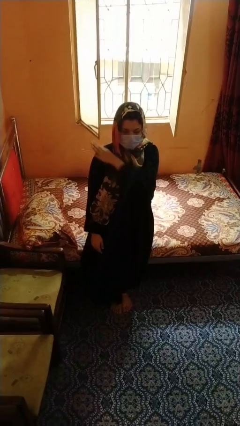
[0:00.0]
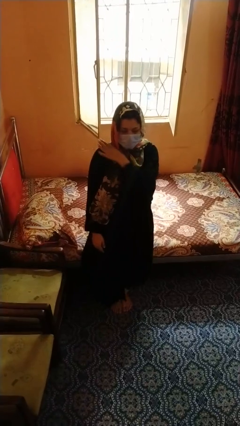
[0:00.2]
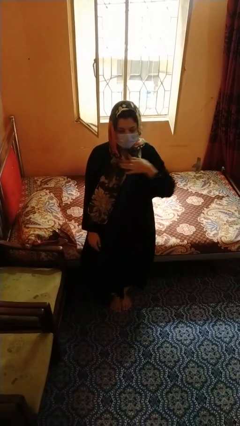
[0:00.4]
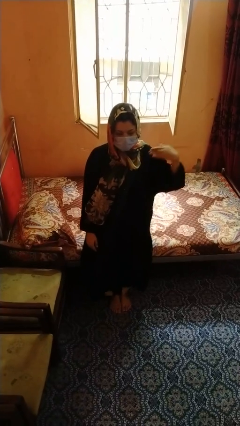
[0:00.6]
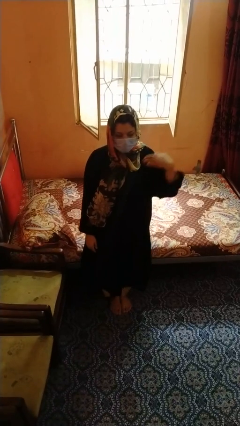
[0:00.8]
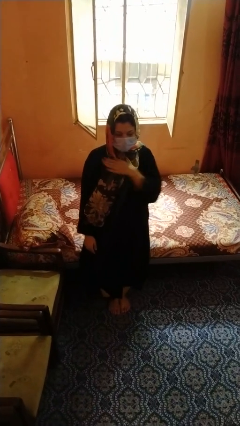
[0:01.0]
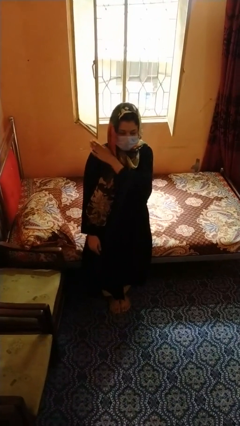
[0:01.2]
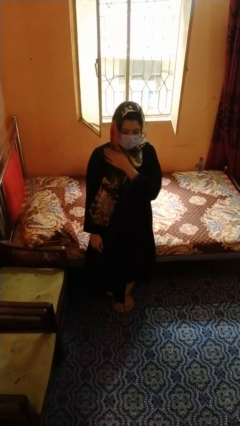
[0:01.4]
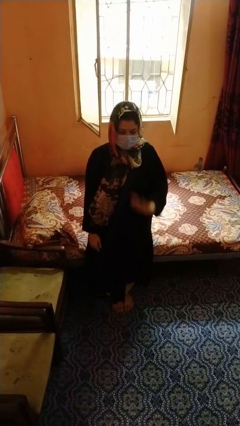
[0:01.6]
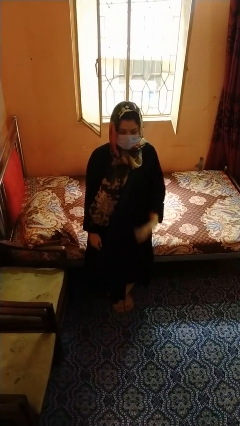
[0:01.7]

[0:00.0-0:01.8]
person gestures cut

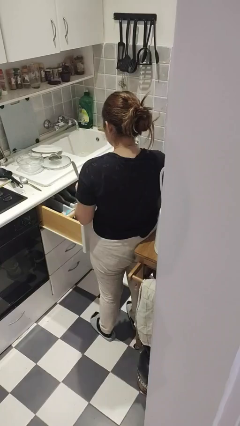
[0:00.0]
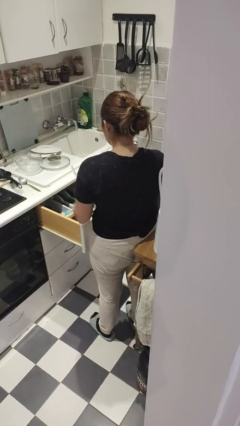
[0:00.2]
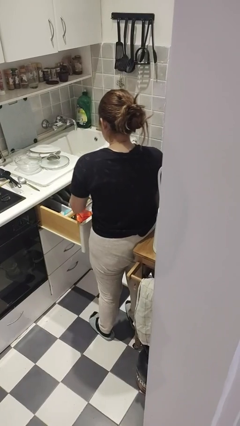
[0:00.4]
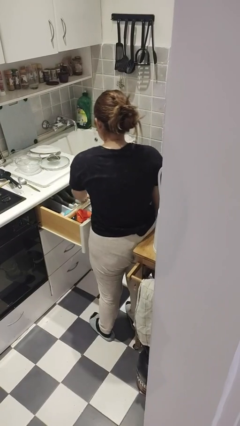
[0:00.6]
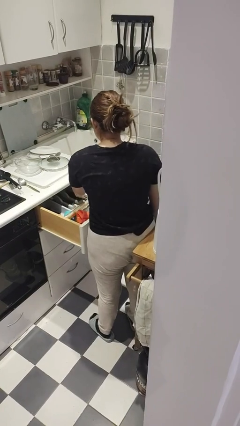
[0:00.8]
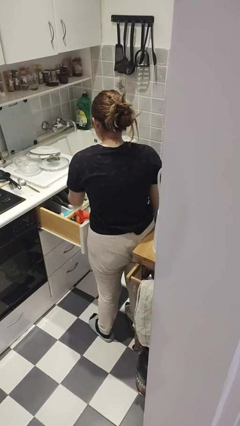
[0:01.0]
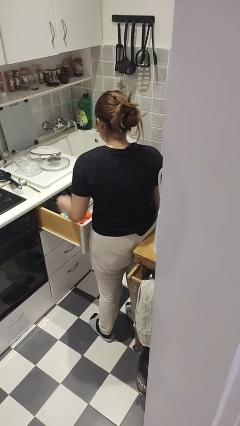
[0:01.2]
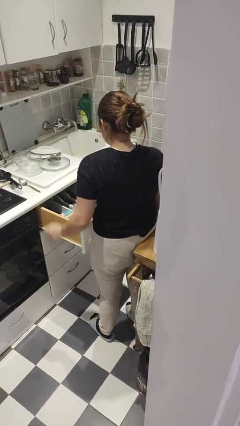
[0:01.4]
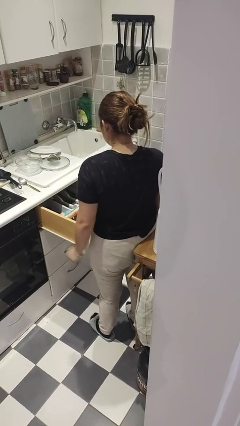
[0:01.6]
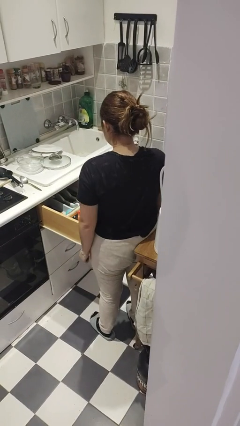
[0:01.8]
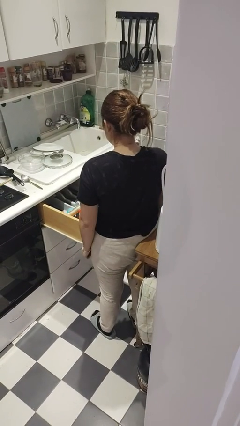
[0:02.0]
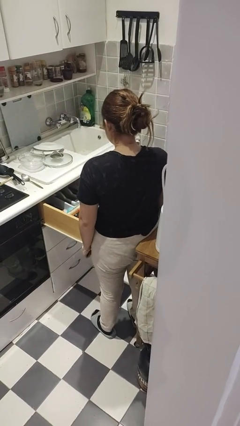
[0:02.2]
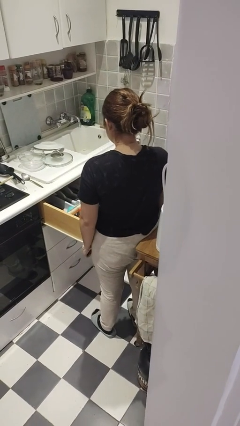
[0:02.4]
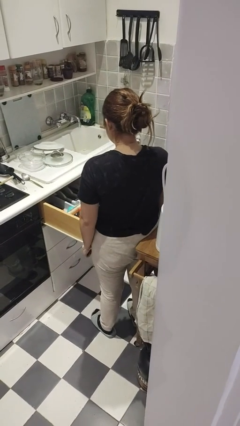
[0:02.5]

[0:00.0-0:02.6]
person puts object into kitchen drawer

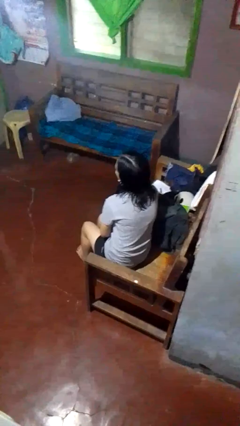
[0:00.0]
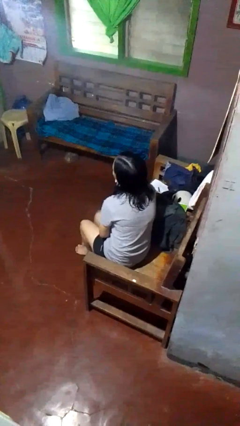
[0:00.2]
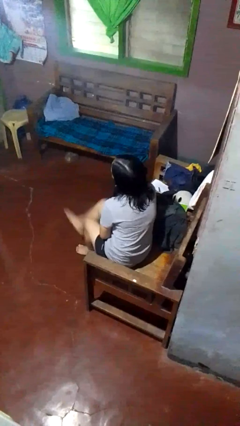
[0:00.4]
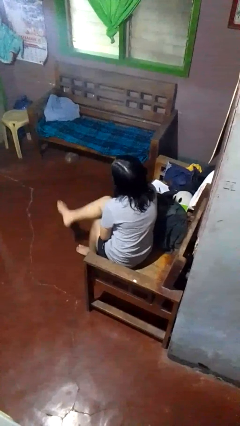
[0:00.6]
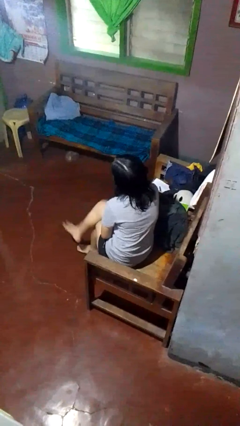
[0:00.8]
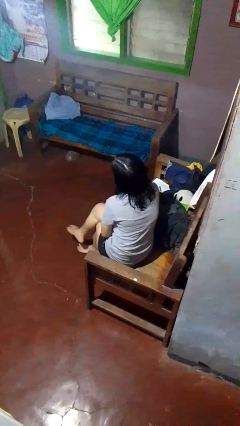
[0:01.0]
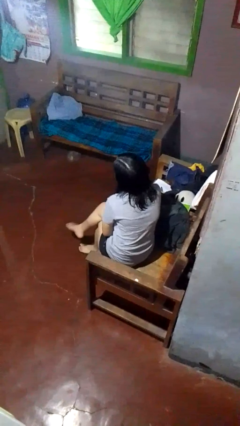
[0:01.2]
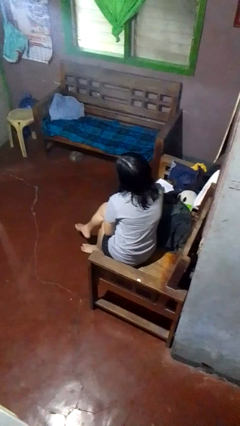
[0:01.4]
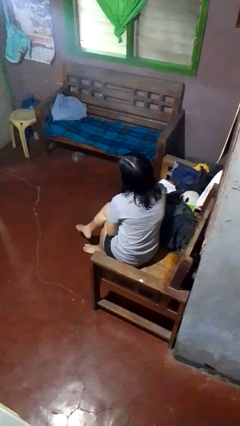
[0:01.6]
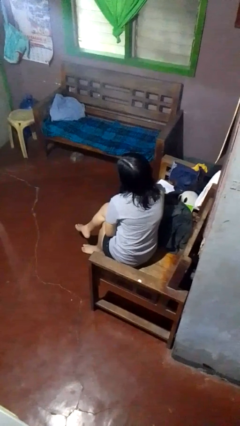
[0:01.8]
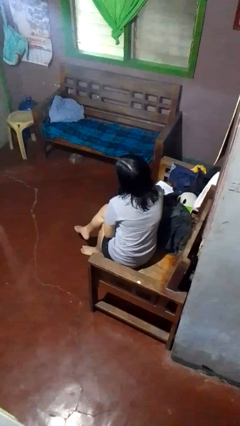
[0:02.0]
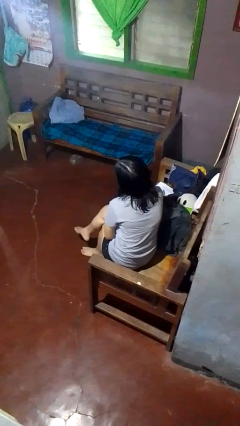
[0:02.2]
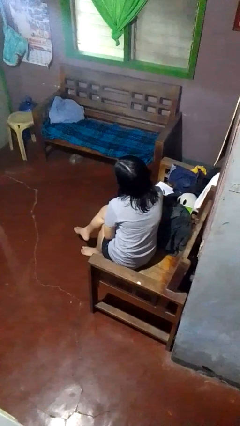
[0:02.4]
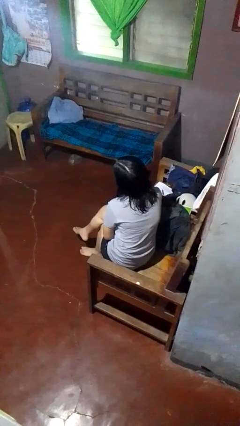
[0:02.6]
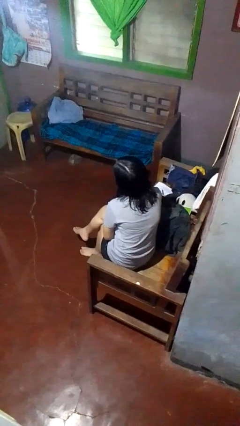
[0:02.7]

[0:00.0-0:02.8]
person crosses legs

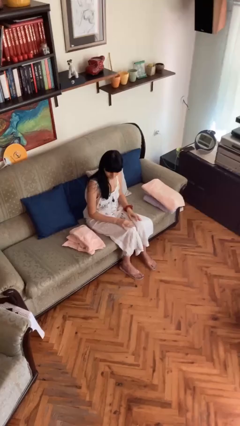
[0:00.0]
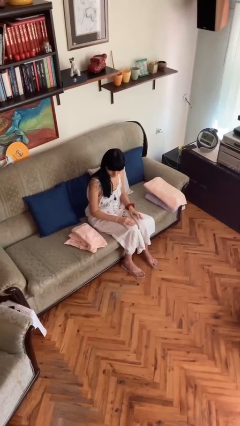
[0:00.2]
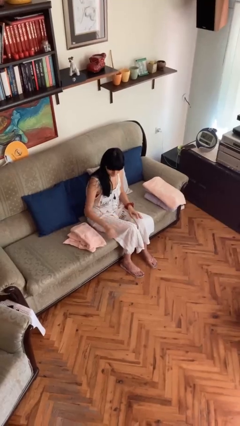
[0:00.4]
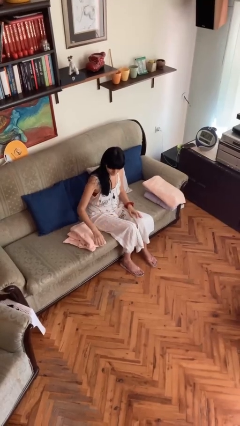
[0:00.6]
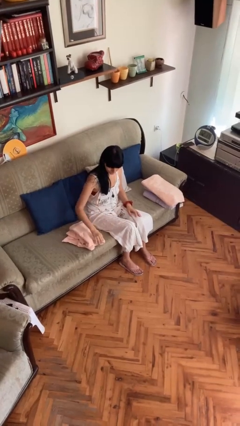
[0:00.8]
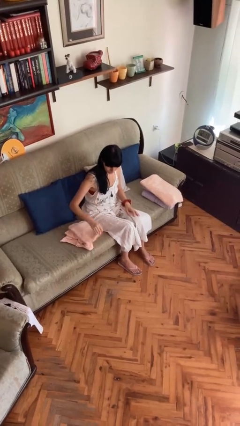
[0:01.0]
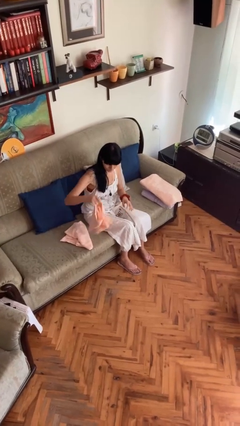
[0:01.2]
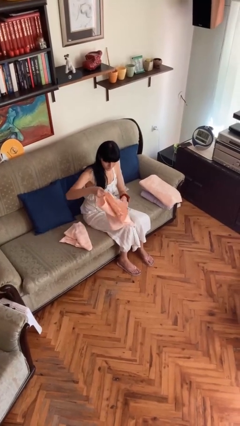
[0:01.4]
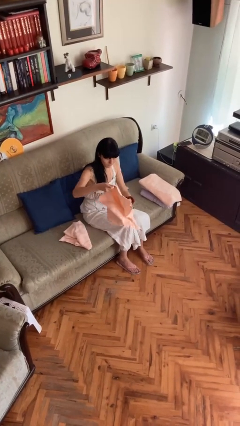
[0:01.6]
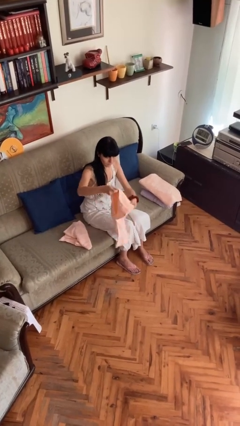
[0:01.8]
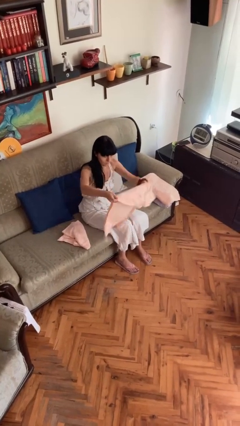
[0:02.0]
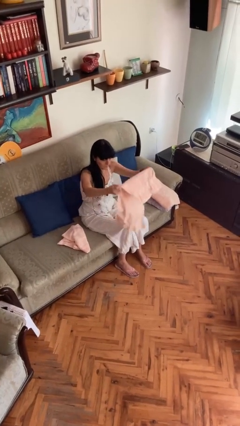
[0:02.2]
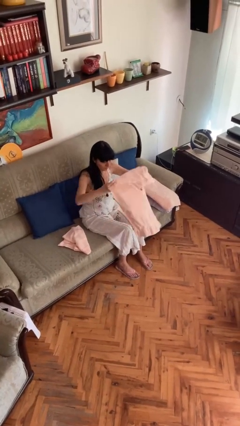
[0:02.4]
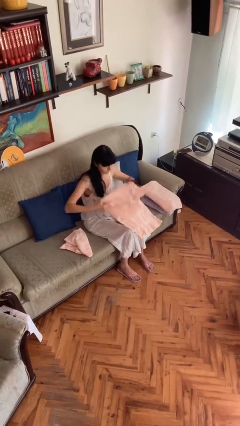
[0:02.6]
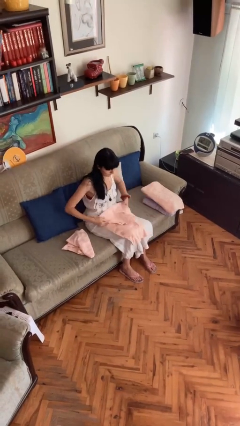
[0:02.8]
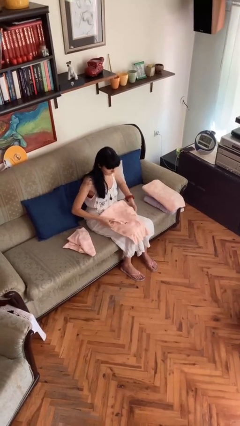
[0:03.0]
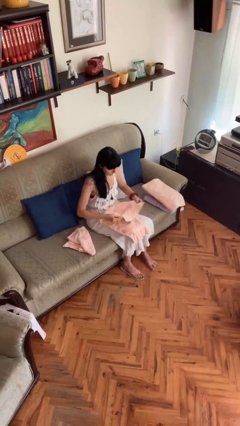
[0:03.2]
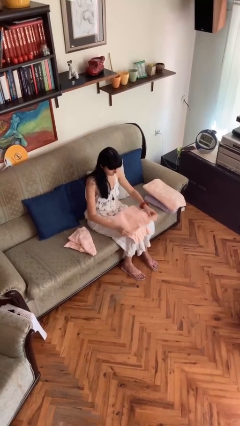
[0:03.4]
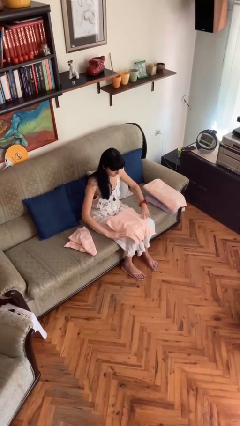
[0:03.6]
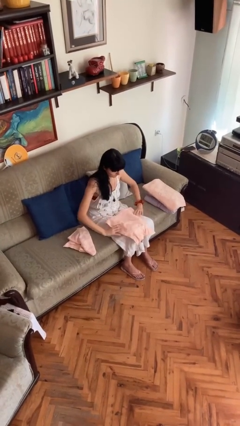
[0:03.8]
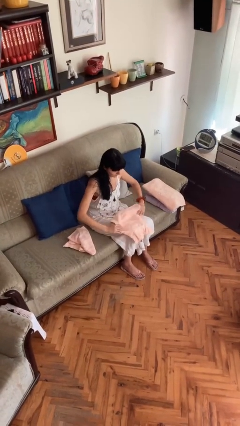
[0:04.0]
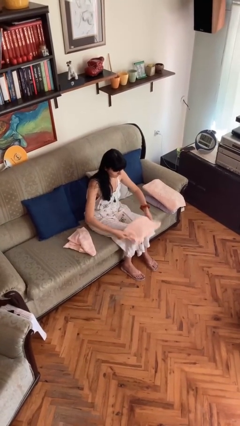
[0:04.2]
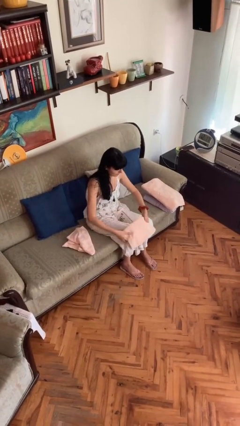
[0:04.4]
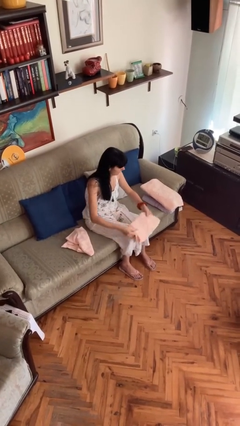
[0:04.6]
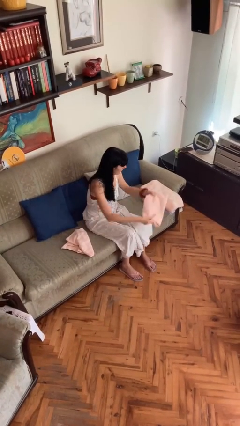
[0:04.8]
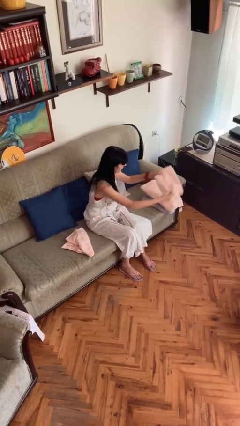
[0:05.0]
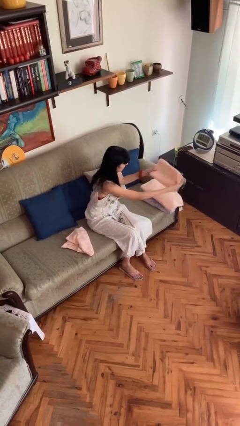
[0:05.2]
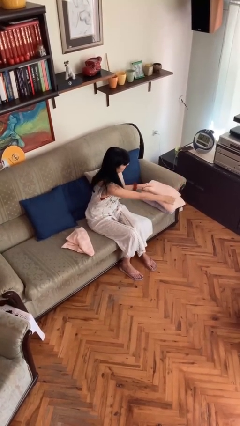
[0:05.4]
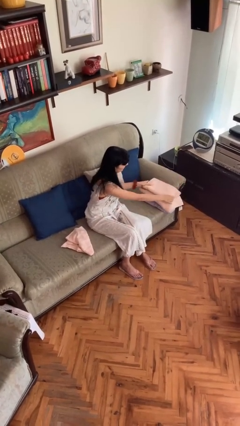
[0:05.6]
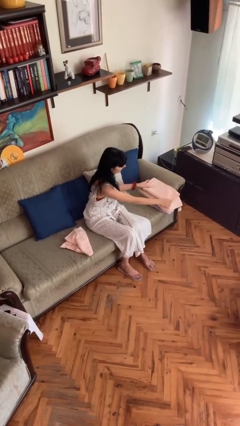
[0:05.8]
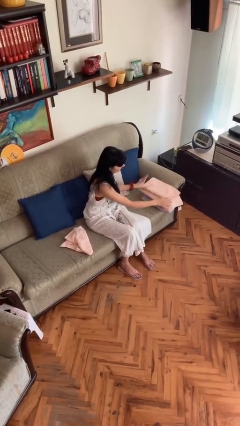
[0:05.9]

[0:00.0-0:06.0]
person folds towel

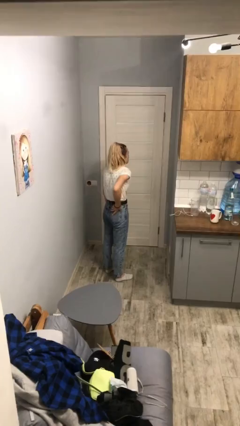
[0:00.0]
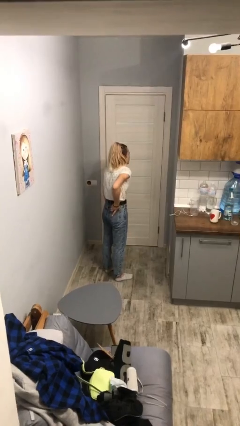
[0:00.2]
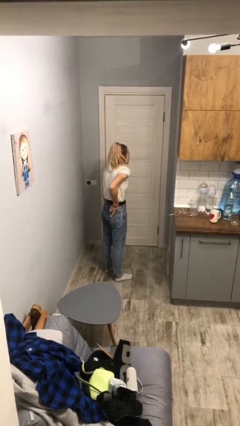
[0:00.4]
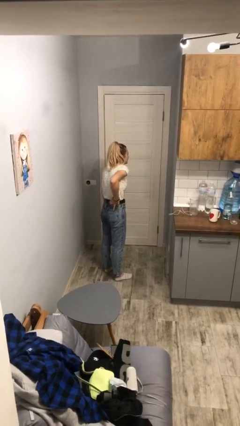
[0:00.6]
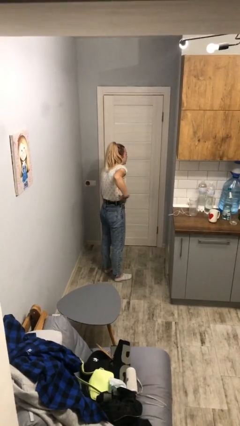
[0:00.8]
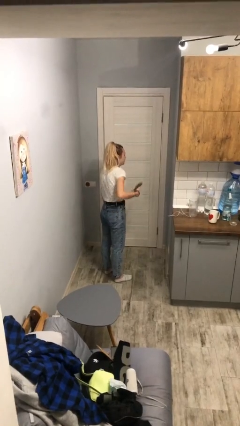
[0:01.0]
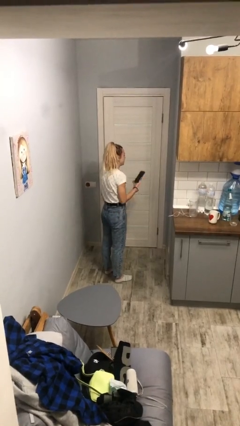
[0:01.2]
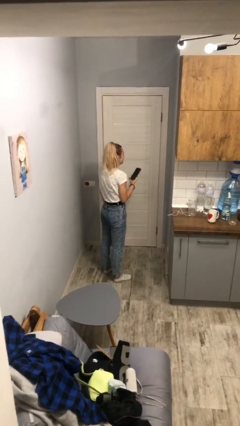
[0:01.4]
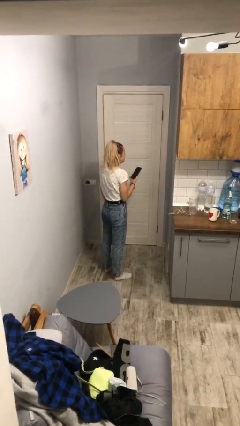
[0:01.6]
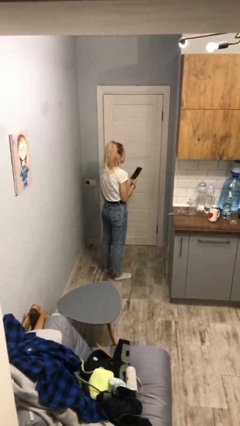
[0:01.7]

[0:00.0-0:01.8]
person takes phone from pocket

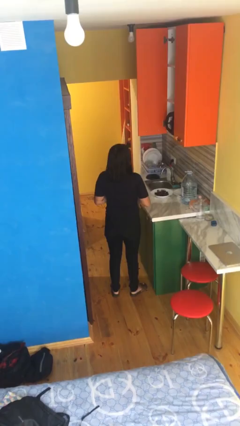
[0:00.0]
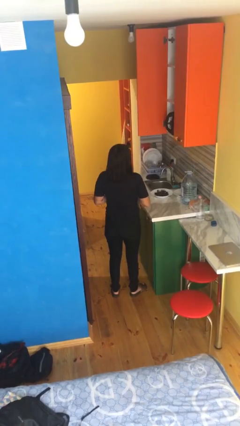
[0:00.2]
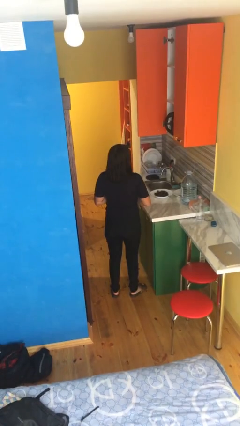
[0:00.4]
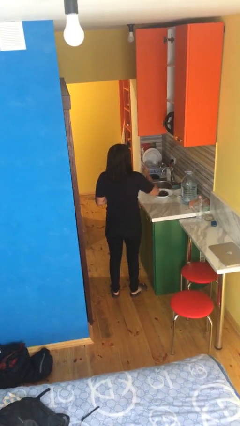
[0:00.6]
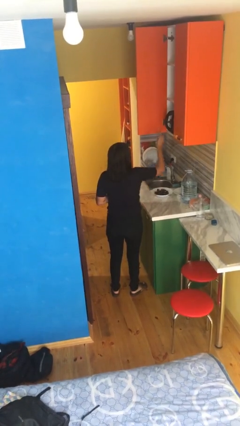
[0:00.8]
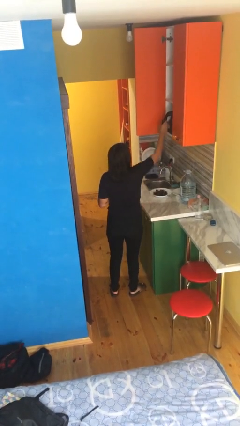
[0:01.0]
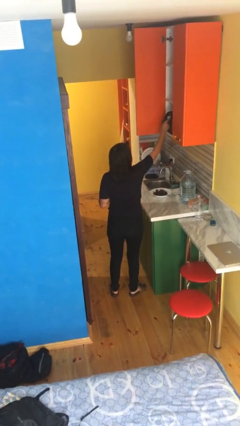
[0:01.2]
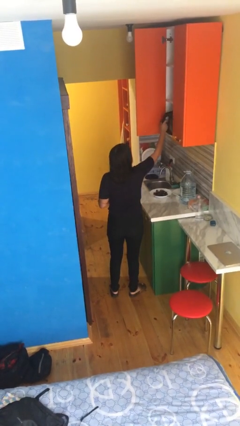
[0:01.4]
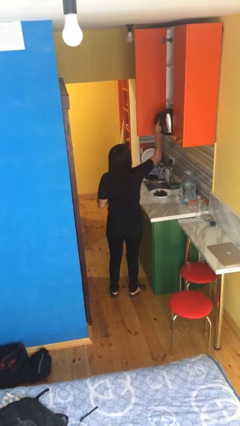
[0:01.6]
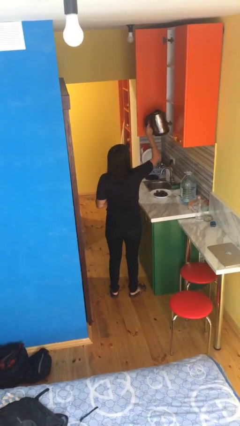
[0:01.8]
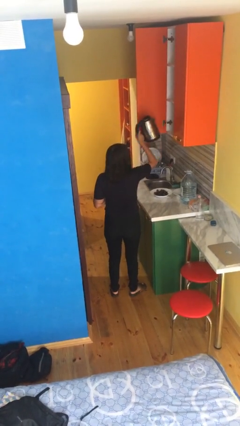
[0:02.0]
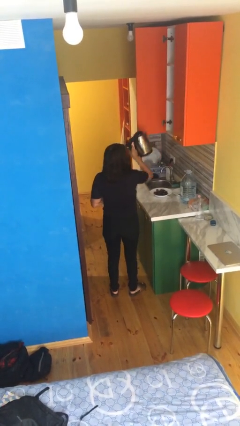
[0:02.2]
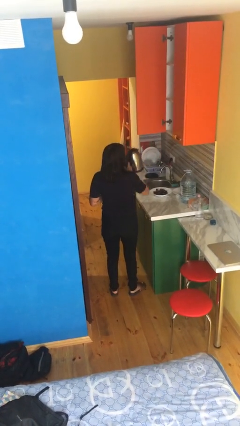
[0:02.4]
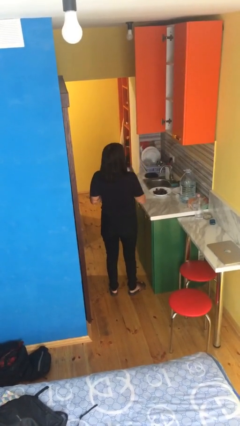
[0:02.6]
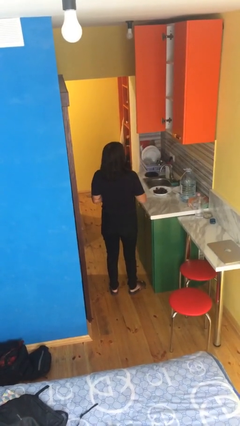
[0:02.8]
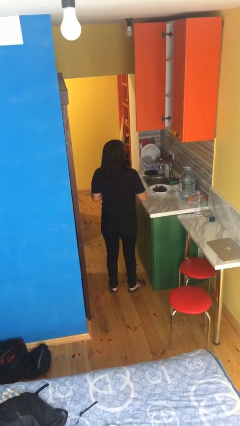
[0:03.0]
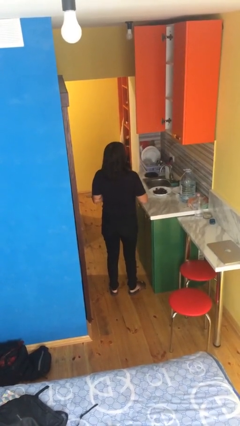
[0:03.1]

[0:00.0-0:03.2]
person picks up object from cabinet
